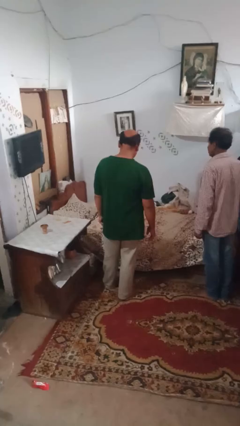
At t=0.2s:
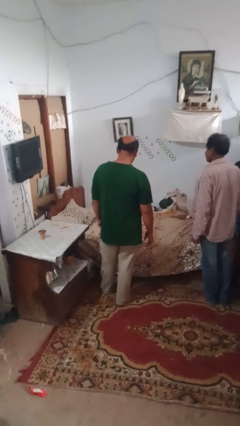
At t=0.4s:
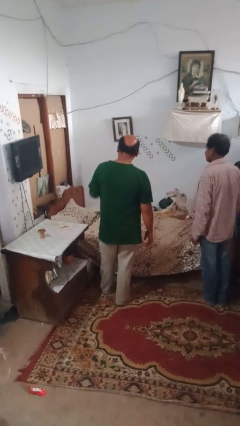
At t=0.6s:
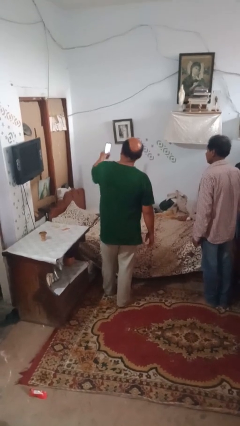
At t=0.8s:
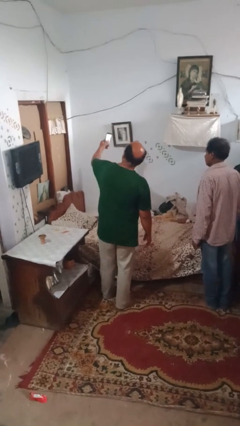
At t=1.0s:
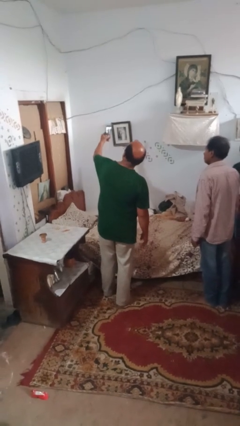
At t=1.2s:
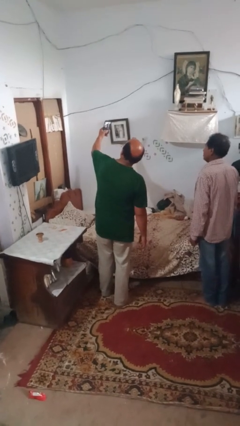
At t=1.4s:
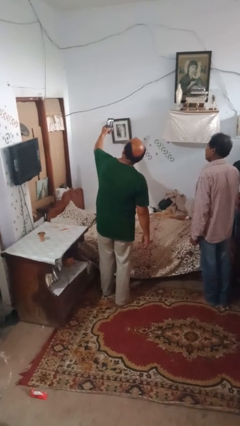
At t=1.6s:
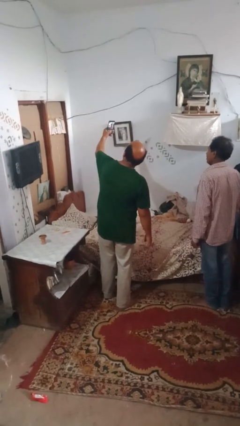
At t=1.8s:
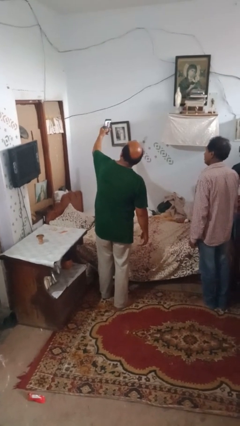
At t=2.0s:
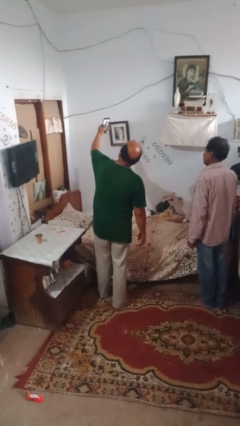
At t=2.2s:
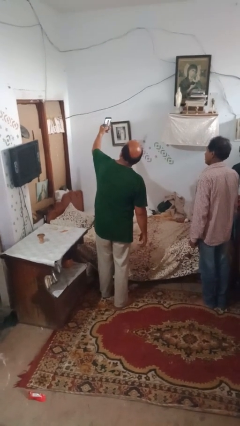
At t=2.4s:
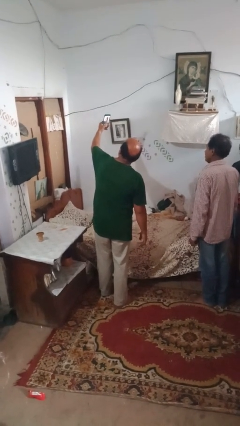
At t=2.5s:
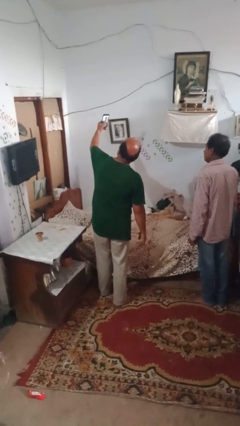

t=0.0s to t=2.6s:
person takes selfie with person

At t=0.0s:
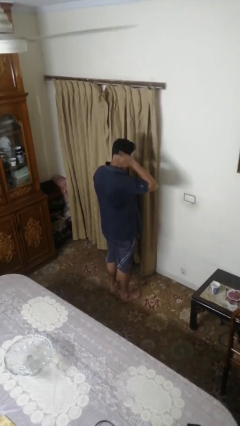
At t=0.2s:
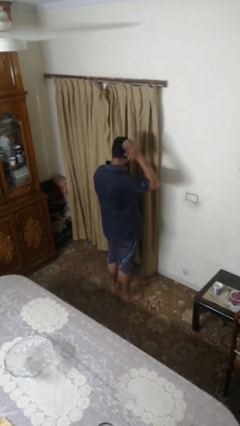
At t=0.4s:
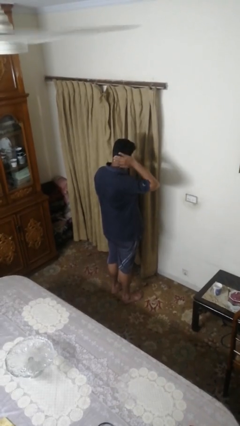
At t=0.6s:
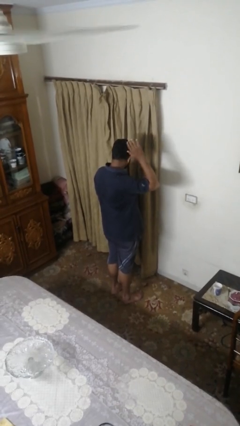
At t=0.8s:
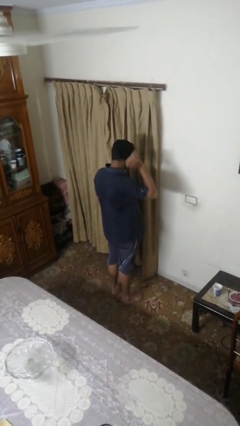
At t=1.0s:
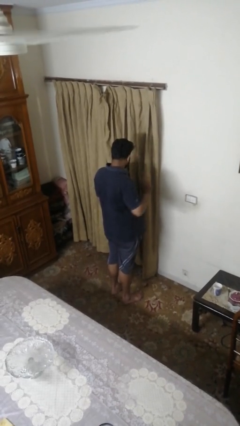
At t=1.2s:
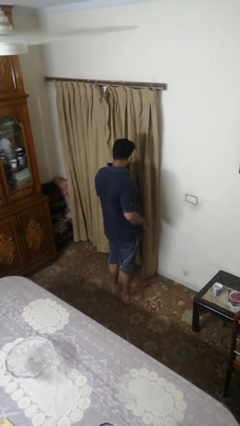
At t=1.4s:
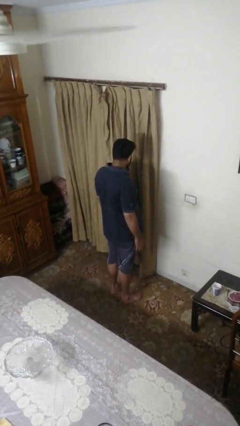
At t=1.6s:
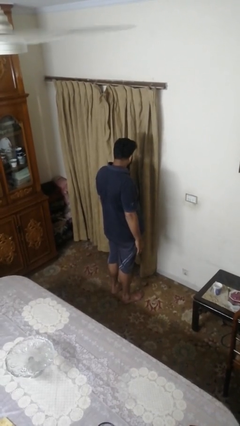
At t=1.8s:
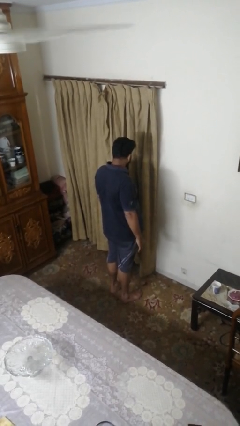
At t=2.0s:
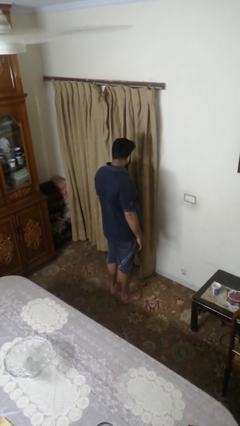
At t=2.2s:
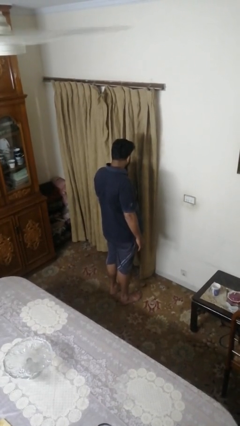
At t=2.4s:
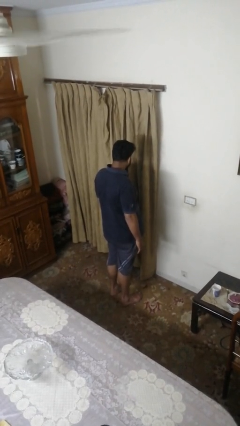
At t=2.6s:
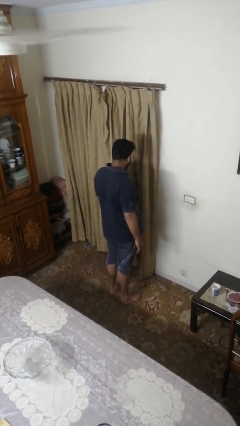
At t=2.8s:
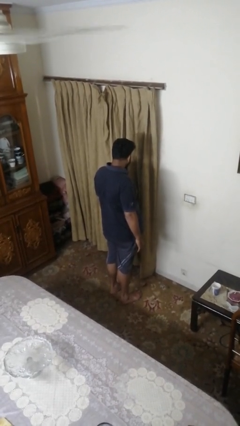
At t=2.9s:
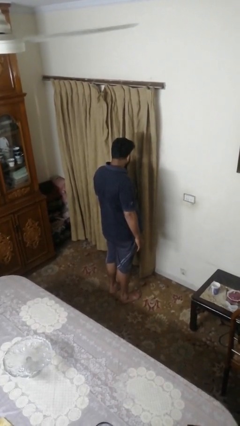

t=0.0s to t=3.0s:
person strokes hair

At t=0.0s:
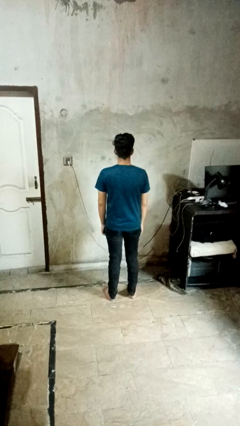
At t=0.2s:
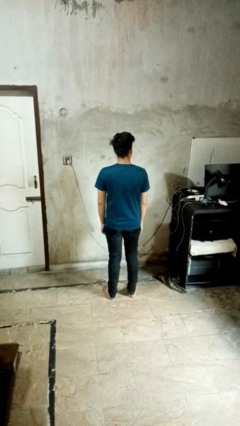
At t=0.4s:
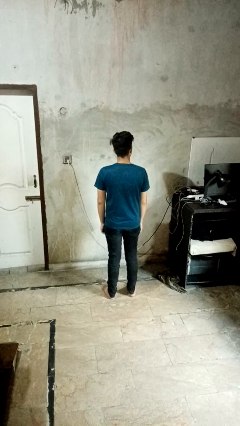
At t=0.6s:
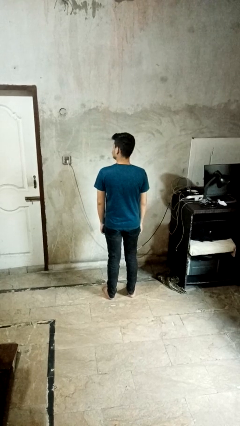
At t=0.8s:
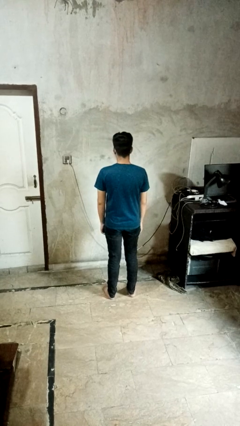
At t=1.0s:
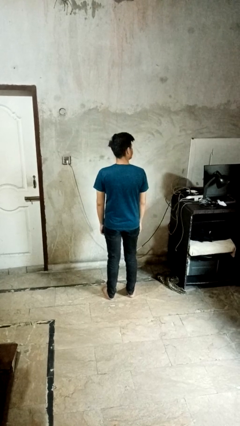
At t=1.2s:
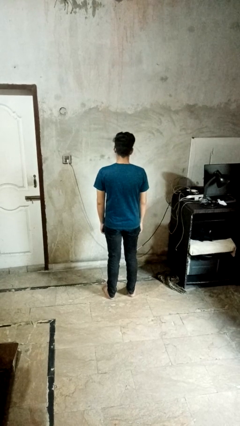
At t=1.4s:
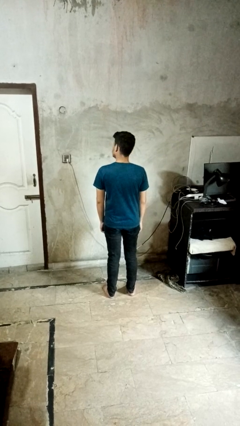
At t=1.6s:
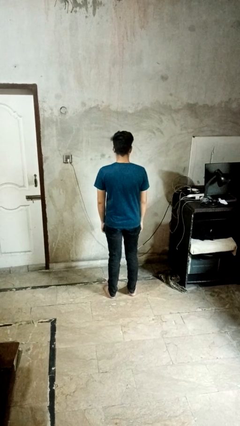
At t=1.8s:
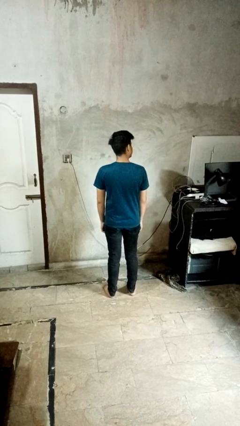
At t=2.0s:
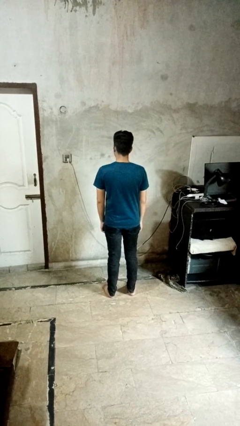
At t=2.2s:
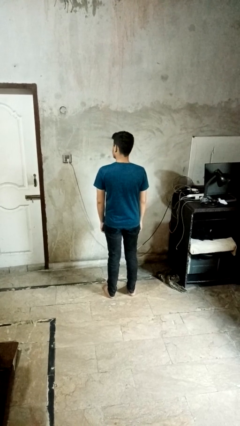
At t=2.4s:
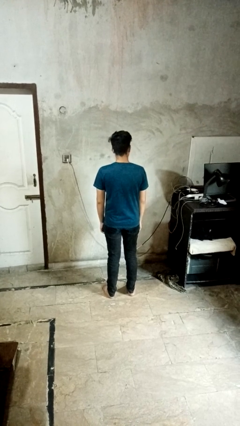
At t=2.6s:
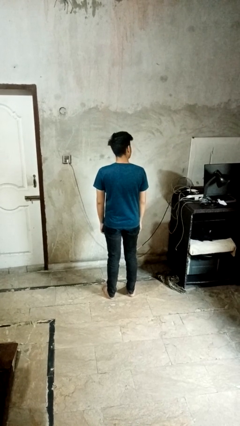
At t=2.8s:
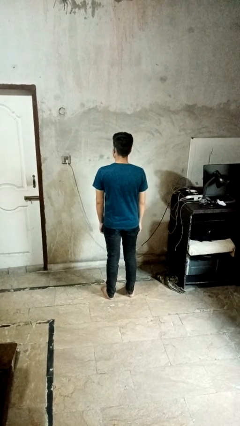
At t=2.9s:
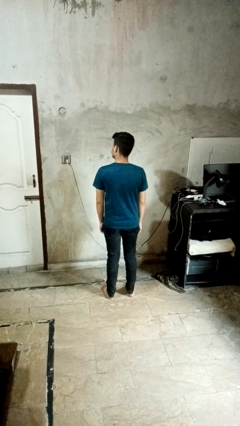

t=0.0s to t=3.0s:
person shakes head

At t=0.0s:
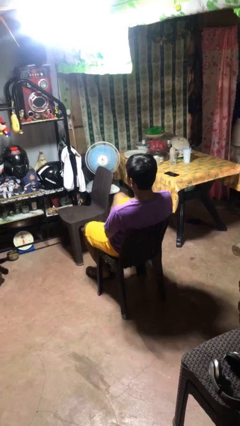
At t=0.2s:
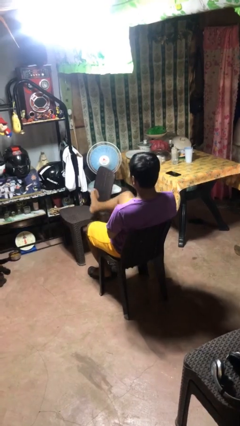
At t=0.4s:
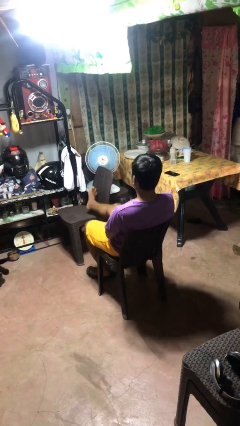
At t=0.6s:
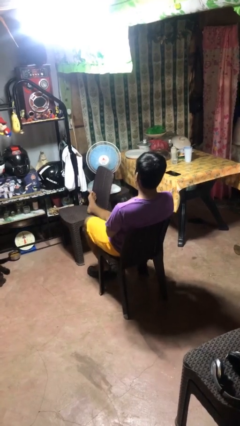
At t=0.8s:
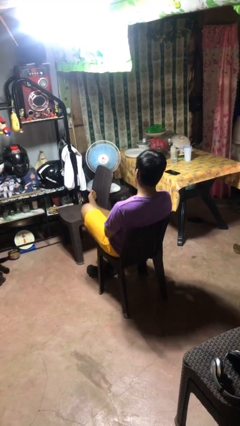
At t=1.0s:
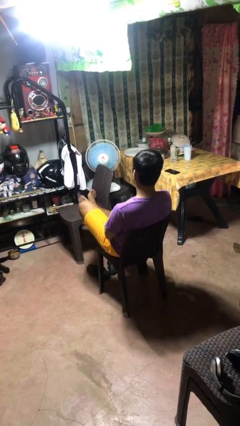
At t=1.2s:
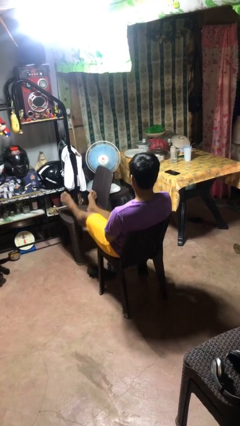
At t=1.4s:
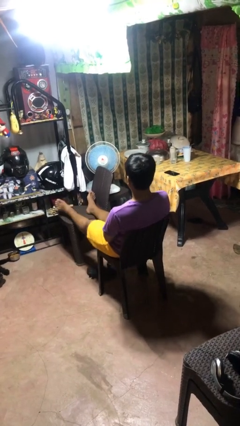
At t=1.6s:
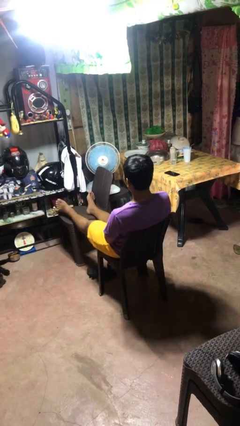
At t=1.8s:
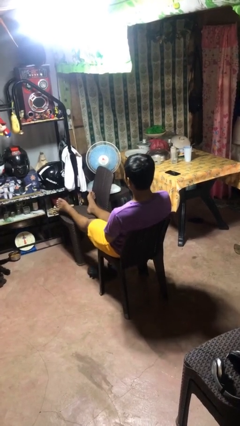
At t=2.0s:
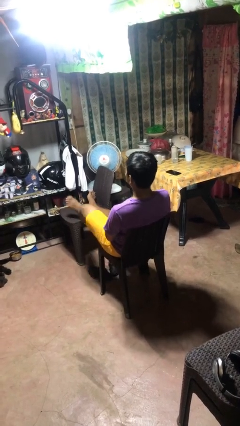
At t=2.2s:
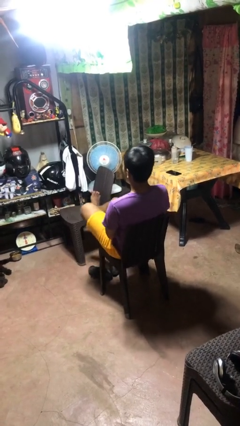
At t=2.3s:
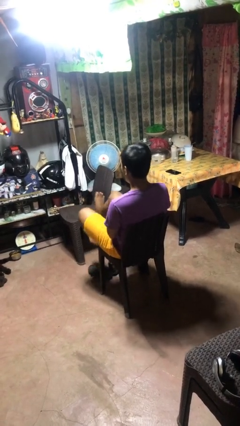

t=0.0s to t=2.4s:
person puts feet up

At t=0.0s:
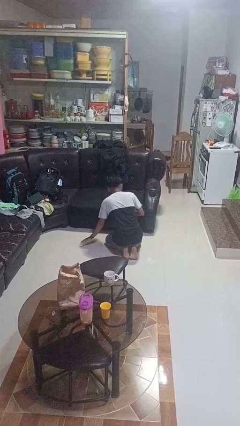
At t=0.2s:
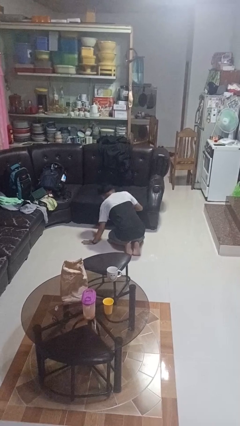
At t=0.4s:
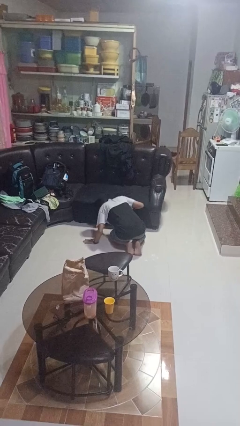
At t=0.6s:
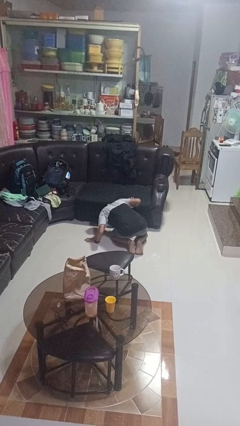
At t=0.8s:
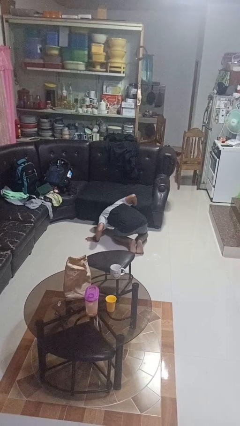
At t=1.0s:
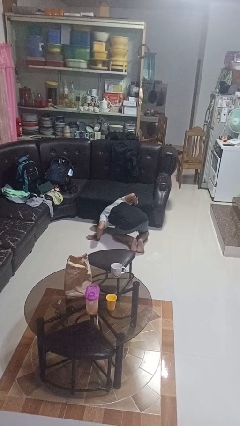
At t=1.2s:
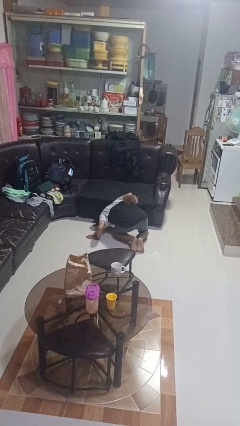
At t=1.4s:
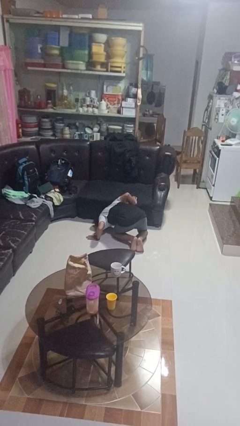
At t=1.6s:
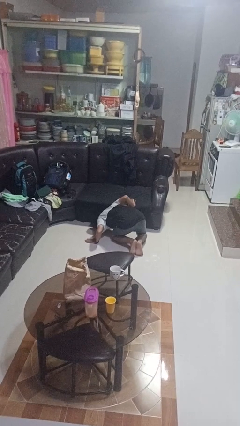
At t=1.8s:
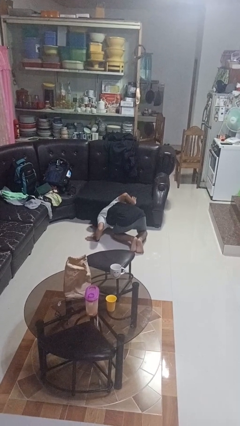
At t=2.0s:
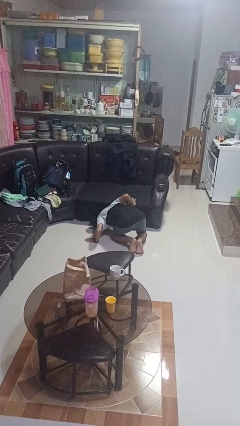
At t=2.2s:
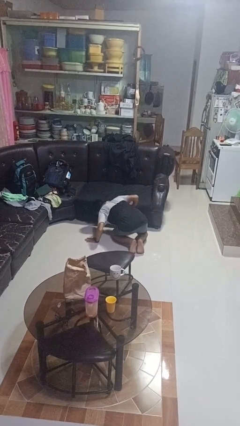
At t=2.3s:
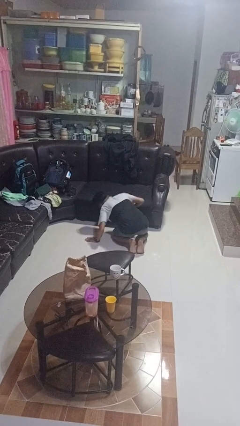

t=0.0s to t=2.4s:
person searches under couch

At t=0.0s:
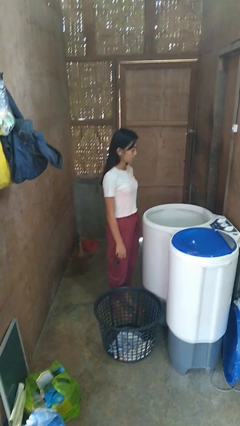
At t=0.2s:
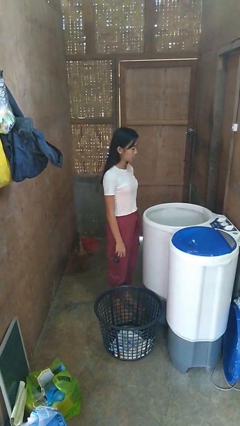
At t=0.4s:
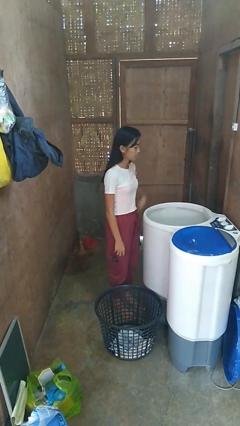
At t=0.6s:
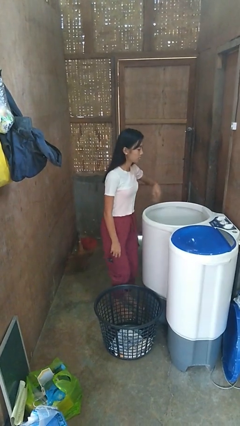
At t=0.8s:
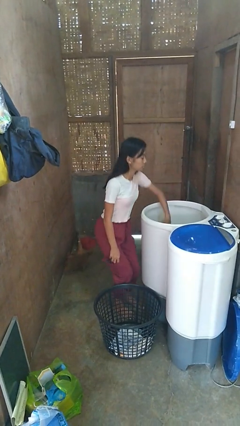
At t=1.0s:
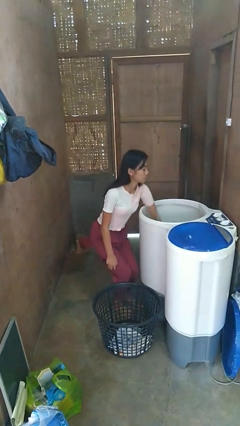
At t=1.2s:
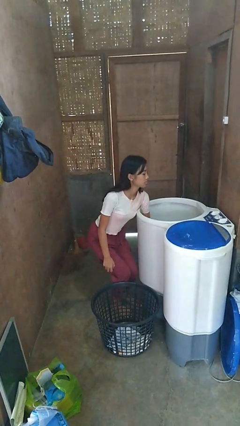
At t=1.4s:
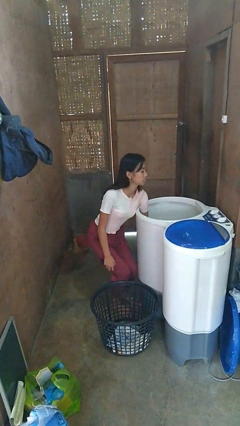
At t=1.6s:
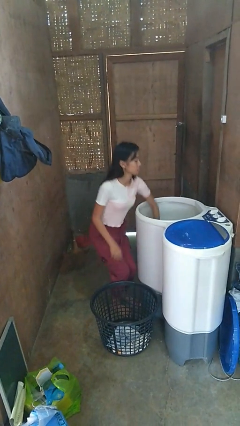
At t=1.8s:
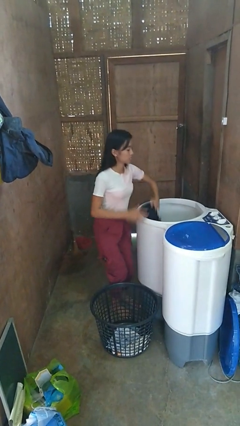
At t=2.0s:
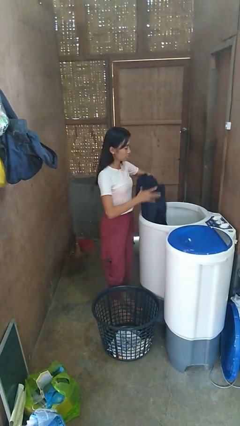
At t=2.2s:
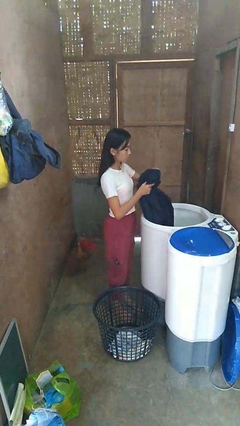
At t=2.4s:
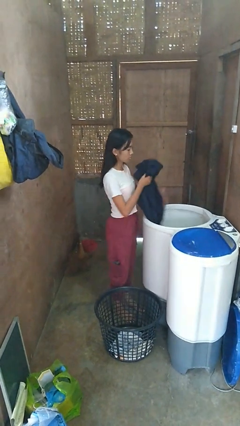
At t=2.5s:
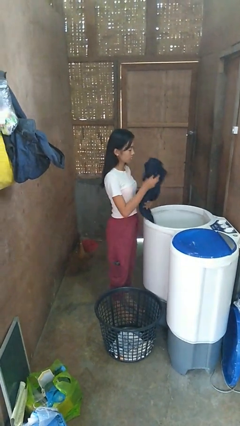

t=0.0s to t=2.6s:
person unloads clotheswasher

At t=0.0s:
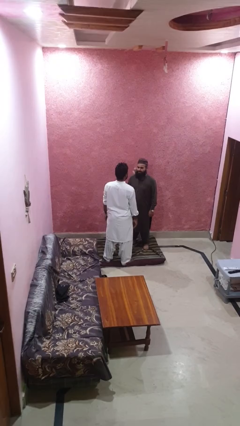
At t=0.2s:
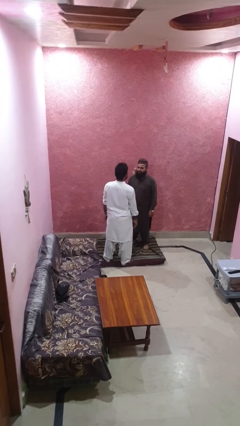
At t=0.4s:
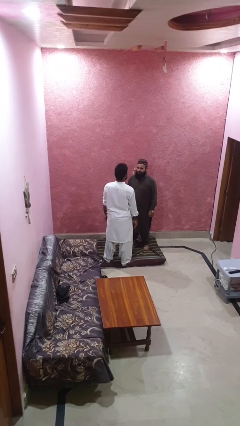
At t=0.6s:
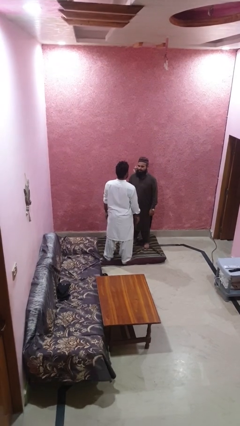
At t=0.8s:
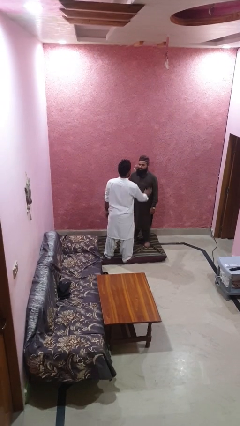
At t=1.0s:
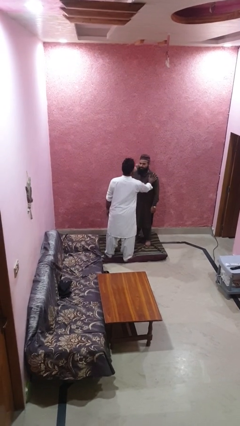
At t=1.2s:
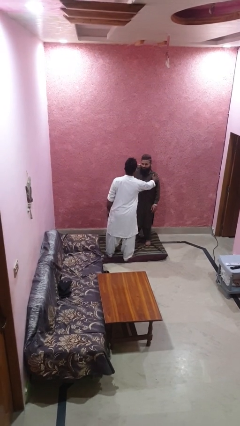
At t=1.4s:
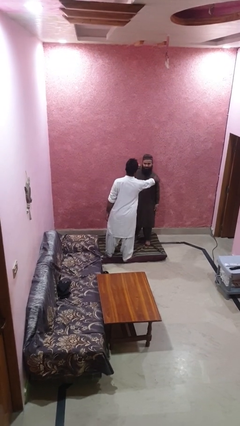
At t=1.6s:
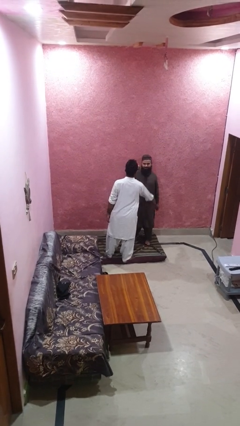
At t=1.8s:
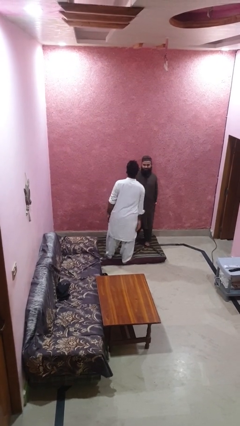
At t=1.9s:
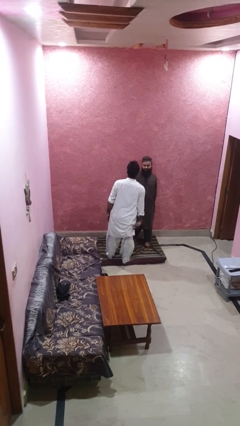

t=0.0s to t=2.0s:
person shoves person
